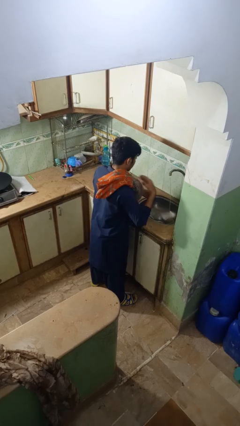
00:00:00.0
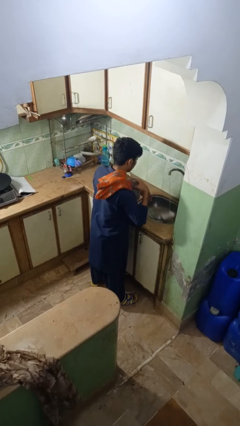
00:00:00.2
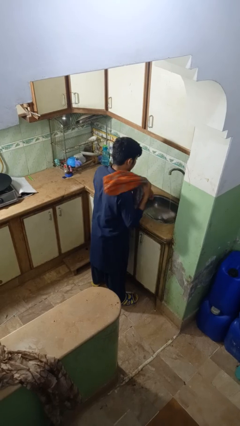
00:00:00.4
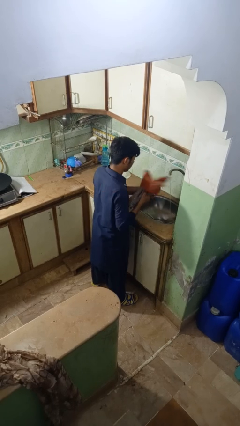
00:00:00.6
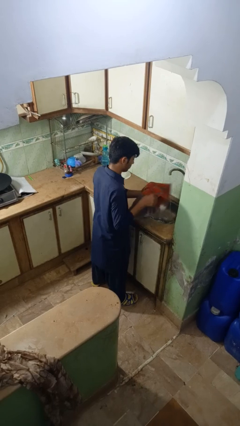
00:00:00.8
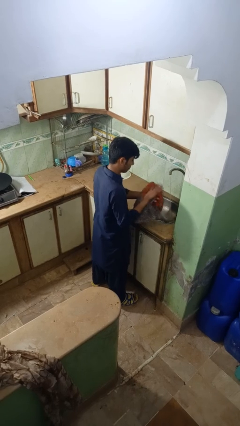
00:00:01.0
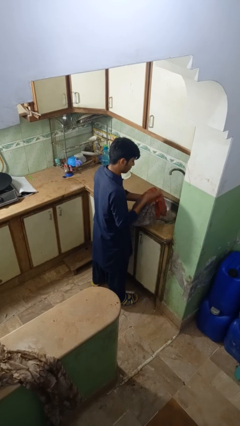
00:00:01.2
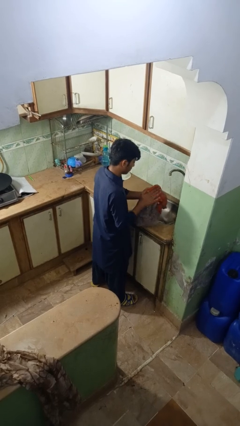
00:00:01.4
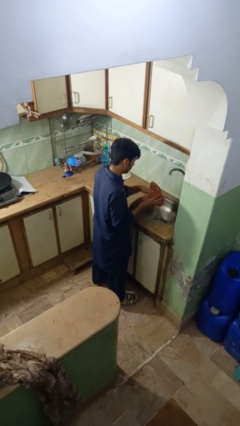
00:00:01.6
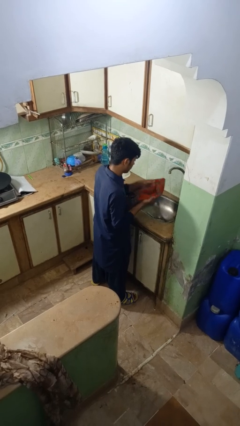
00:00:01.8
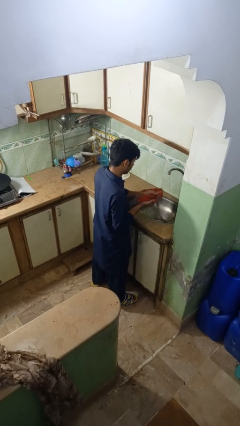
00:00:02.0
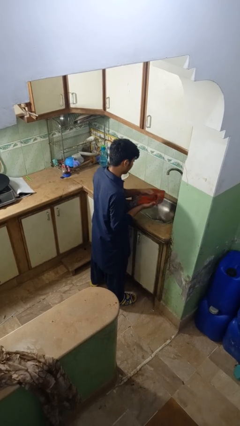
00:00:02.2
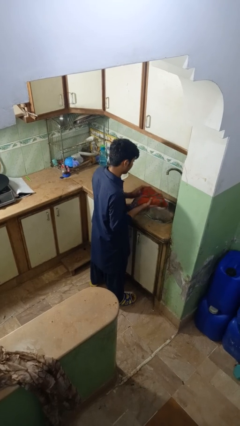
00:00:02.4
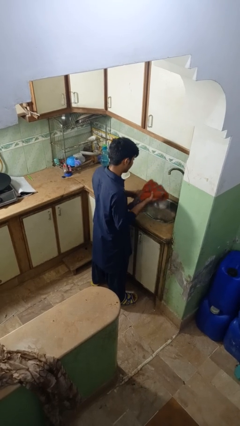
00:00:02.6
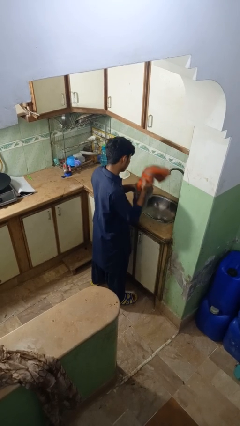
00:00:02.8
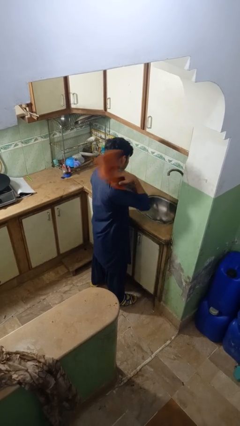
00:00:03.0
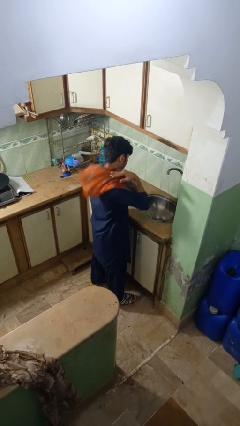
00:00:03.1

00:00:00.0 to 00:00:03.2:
person dries hands with towel

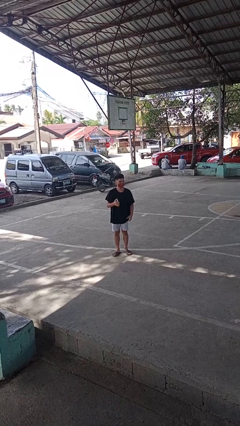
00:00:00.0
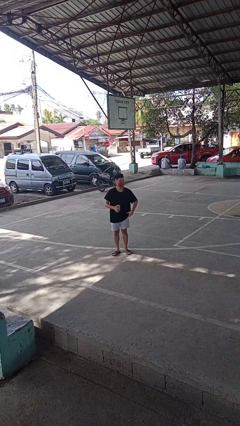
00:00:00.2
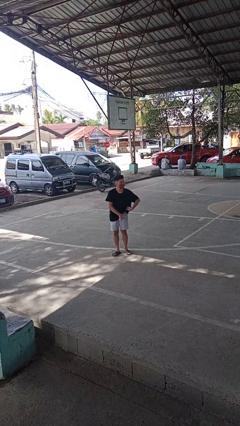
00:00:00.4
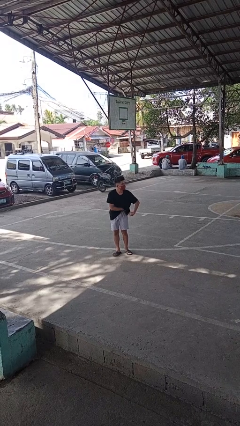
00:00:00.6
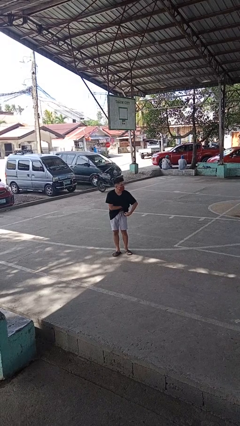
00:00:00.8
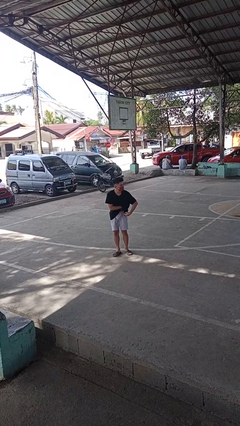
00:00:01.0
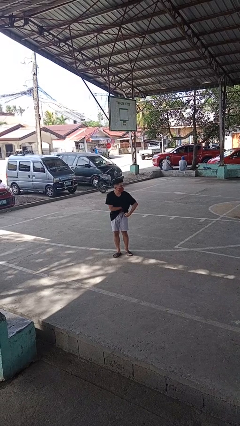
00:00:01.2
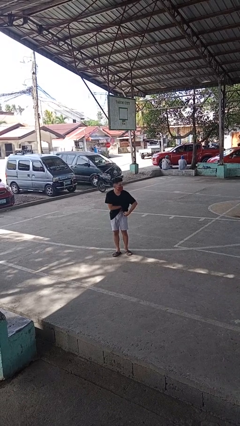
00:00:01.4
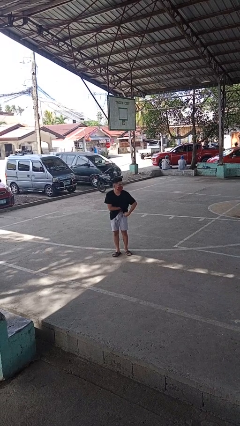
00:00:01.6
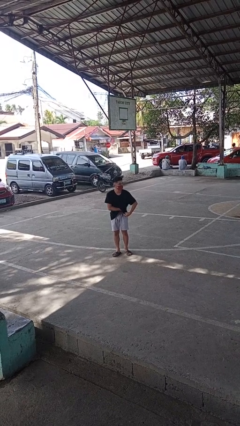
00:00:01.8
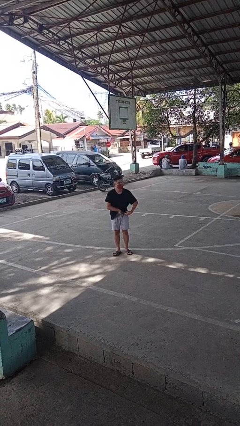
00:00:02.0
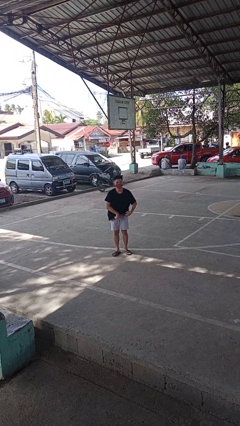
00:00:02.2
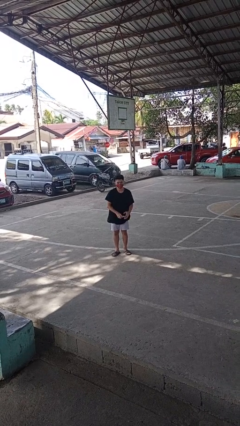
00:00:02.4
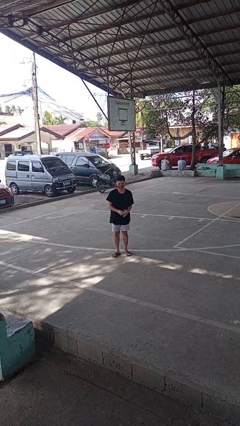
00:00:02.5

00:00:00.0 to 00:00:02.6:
person applies deodorant

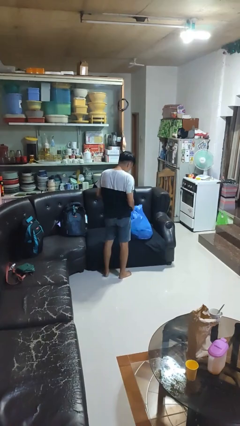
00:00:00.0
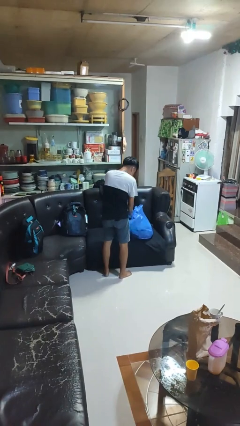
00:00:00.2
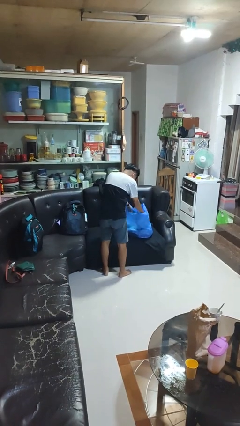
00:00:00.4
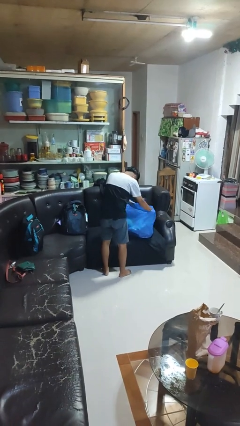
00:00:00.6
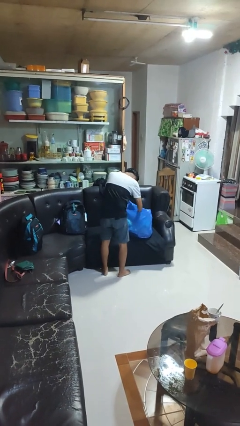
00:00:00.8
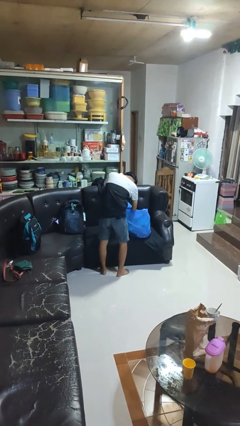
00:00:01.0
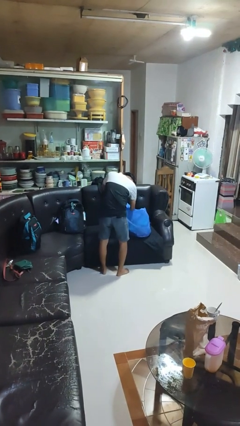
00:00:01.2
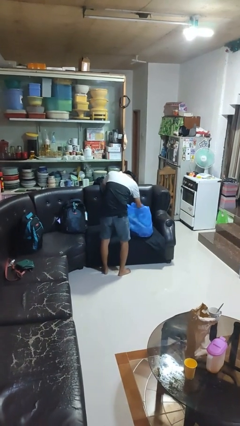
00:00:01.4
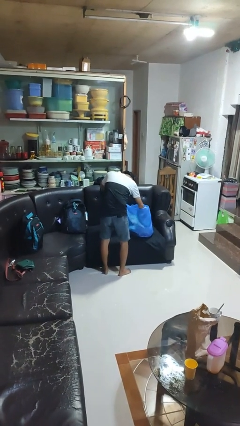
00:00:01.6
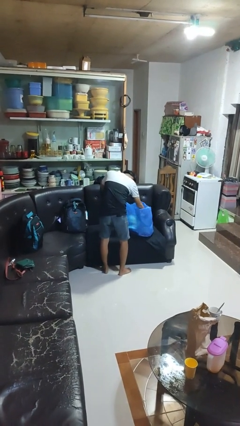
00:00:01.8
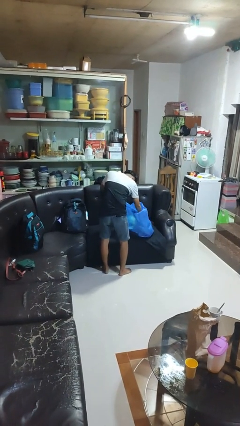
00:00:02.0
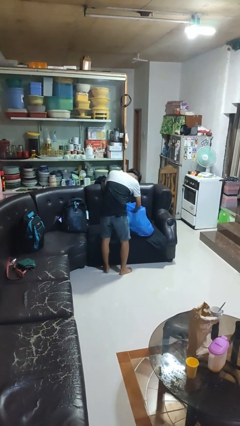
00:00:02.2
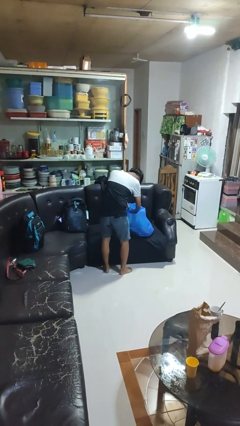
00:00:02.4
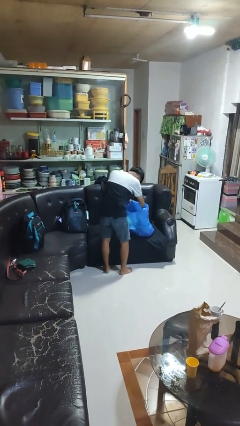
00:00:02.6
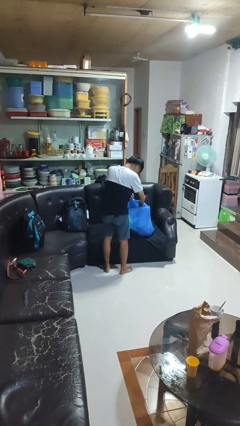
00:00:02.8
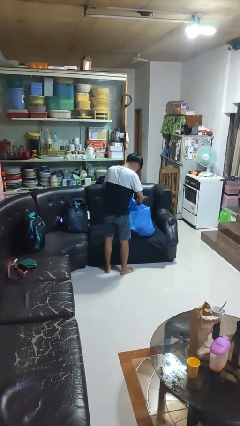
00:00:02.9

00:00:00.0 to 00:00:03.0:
person searches in bag

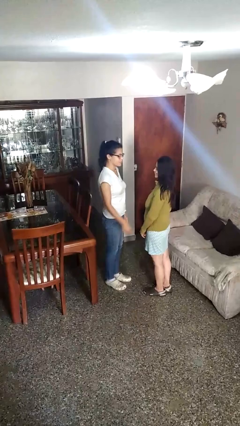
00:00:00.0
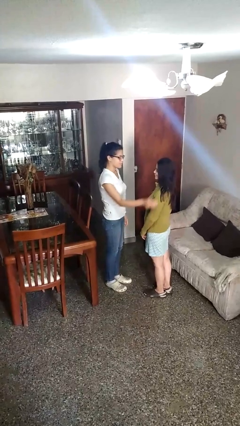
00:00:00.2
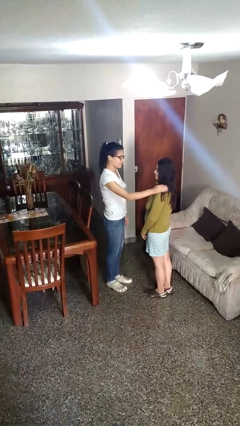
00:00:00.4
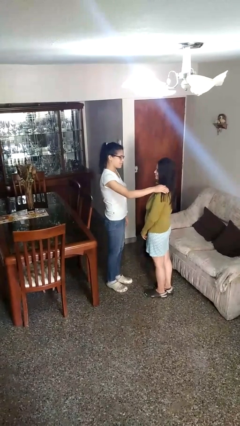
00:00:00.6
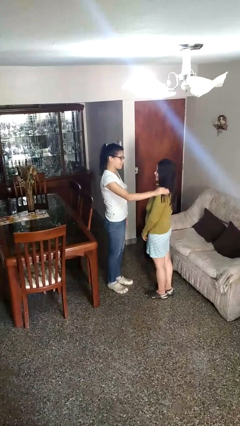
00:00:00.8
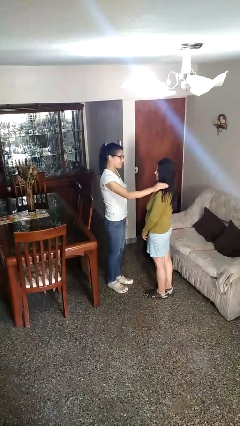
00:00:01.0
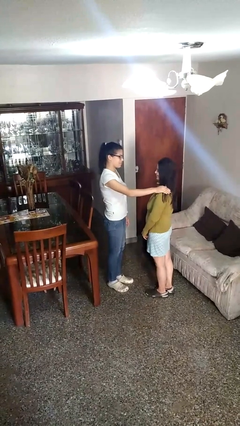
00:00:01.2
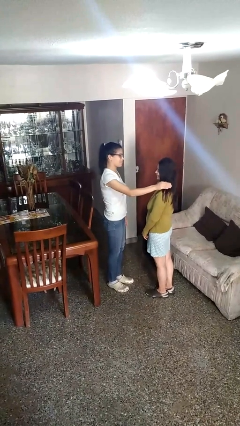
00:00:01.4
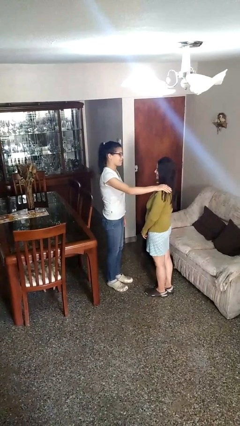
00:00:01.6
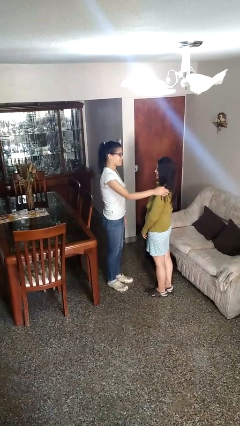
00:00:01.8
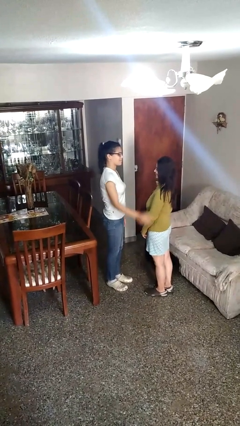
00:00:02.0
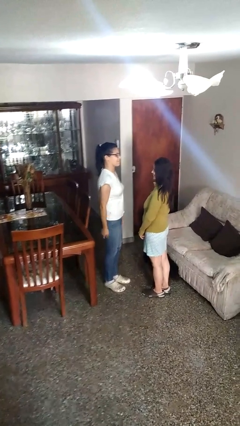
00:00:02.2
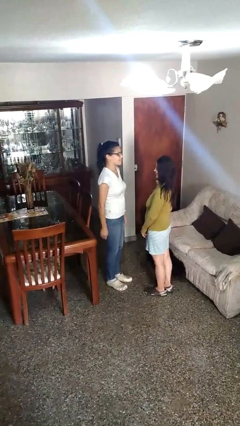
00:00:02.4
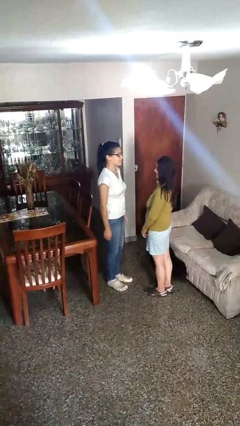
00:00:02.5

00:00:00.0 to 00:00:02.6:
person pounds shoulders of person

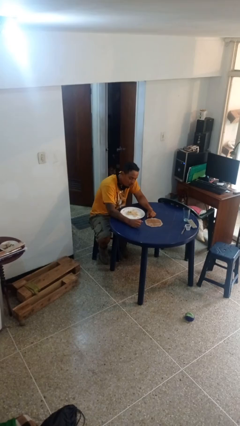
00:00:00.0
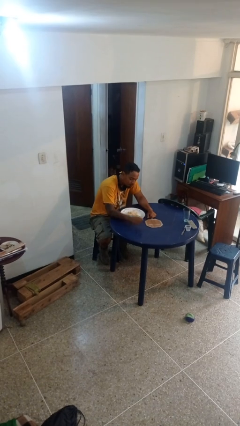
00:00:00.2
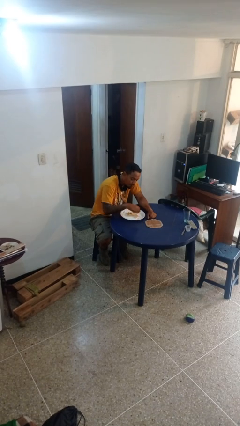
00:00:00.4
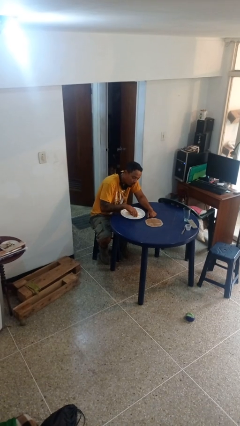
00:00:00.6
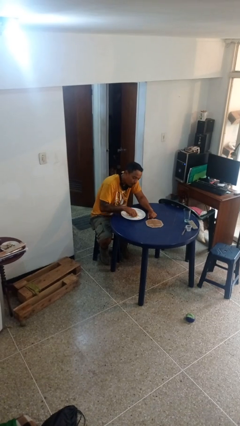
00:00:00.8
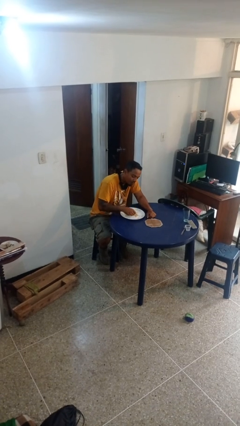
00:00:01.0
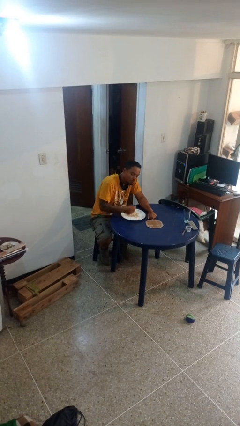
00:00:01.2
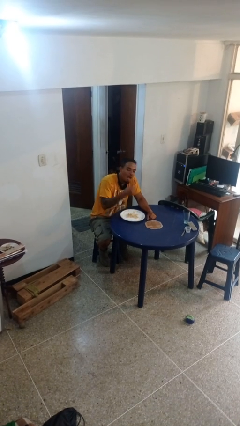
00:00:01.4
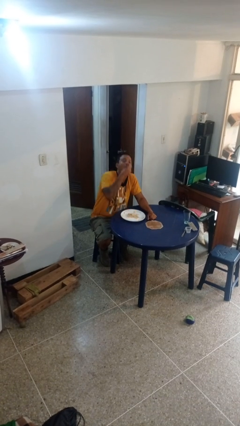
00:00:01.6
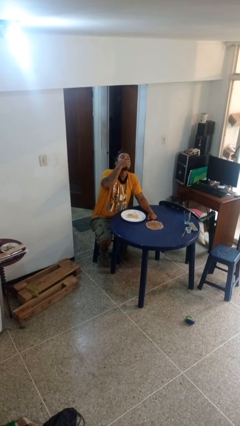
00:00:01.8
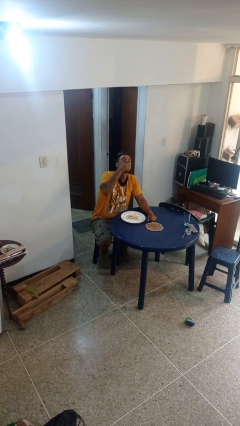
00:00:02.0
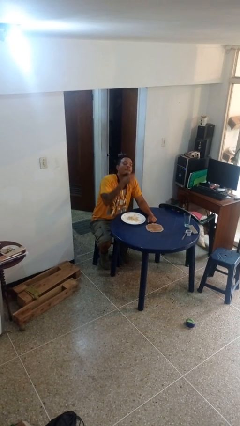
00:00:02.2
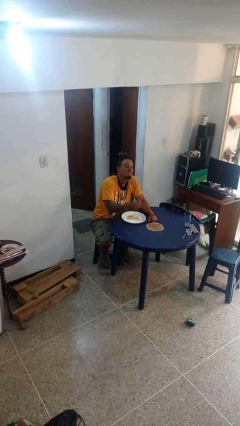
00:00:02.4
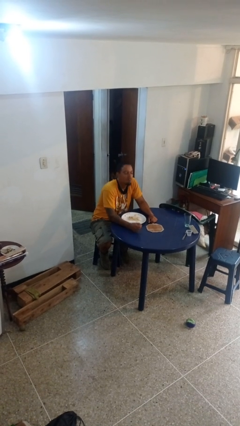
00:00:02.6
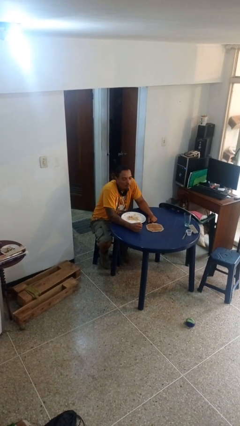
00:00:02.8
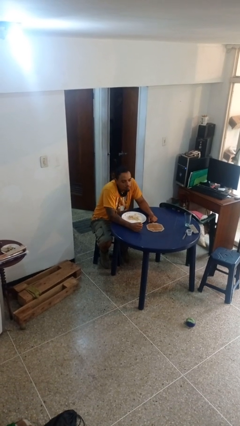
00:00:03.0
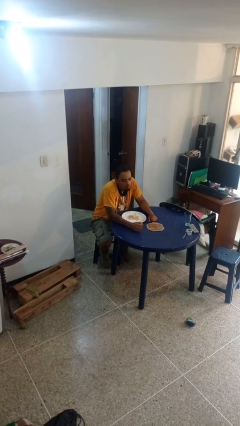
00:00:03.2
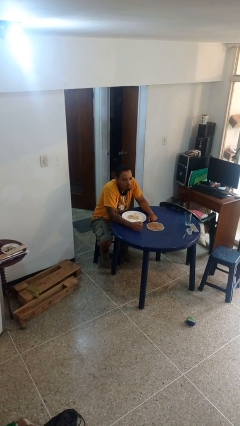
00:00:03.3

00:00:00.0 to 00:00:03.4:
person eats with hands

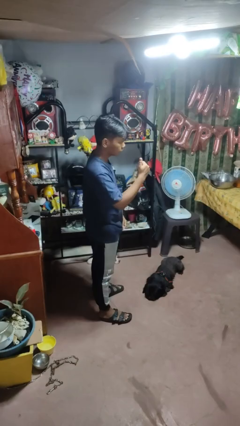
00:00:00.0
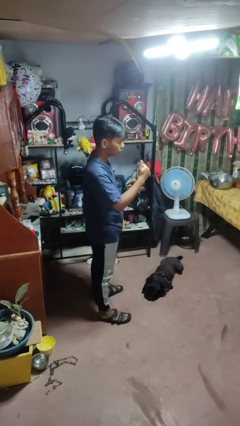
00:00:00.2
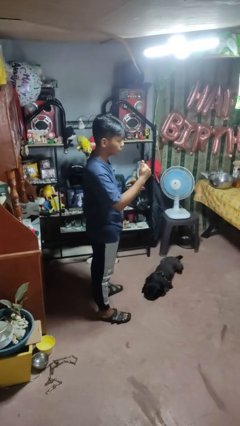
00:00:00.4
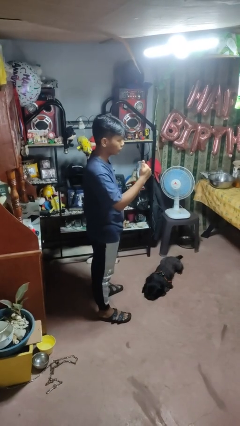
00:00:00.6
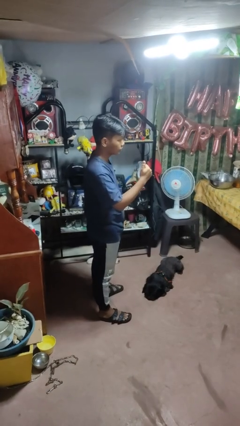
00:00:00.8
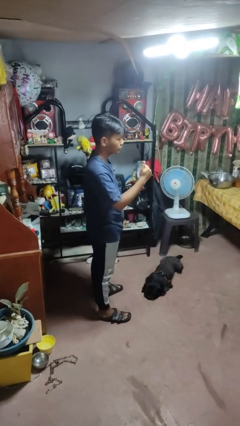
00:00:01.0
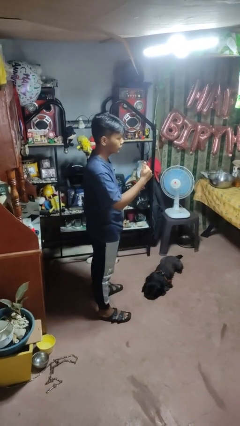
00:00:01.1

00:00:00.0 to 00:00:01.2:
person gestures thumbs up

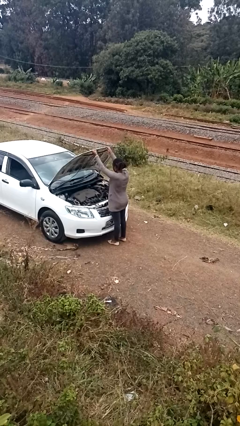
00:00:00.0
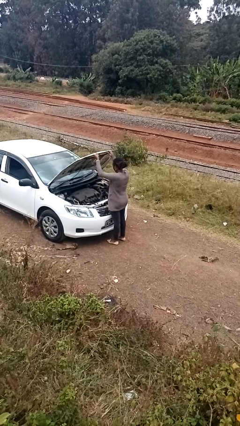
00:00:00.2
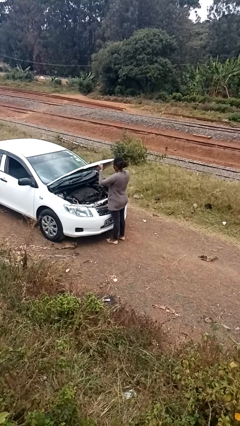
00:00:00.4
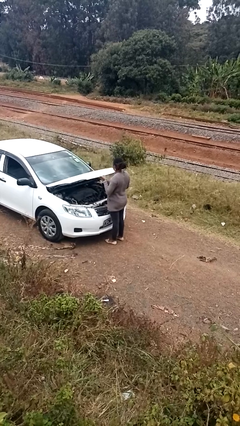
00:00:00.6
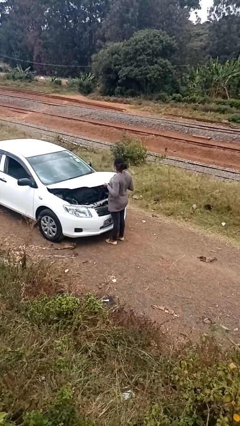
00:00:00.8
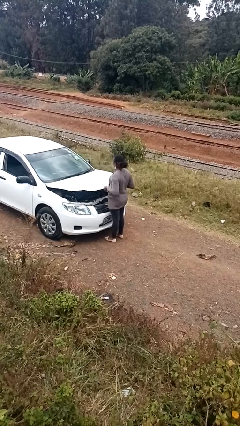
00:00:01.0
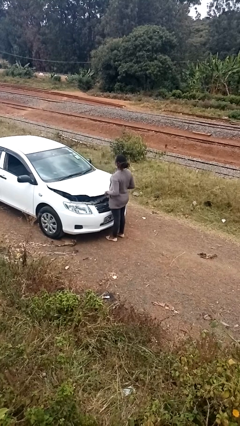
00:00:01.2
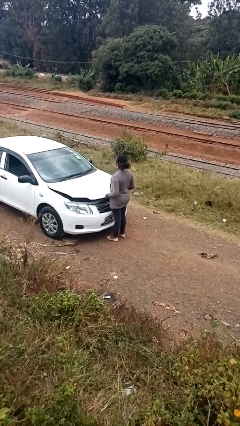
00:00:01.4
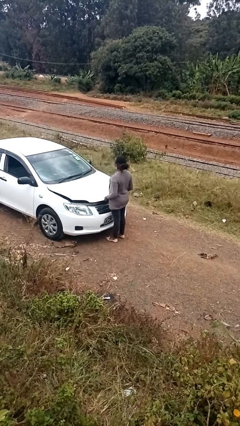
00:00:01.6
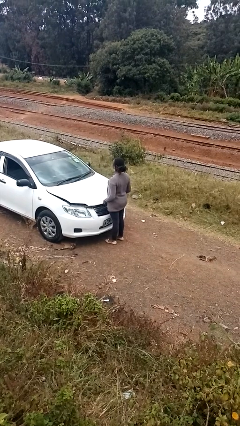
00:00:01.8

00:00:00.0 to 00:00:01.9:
person closes car hood
